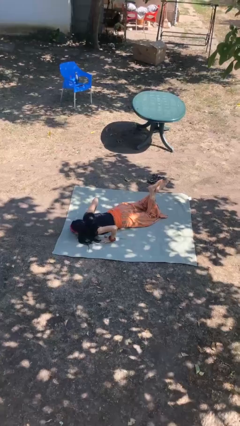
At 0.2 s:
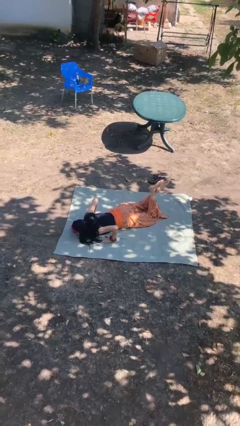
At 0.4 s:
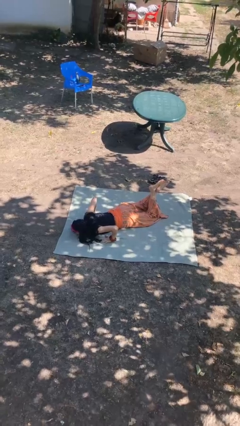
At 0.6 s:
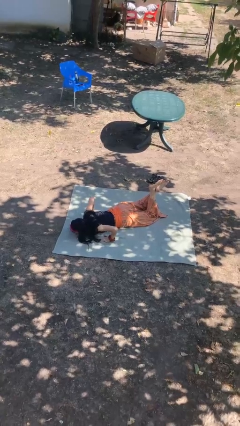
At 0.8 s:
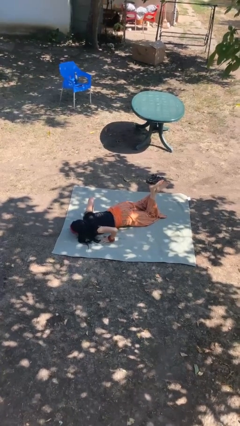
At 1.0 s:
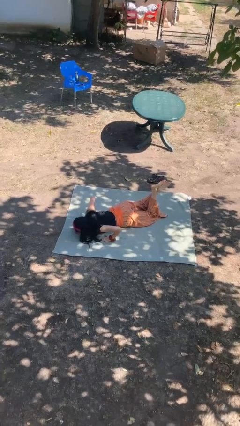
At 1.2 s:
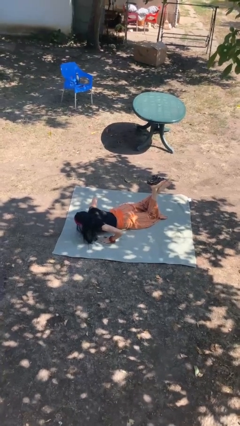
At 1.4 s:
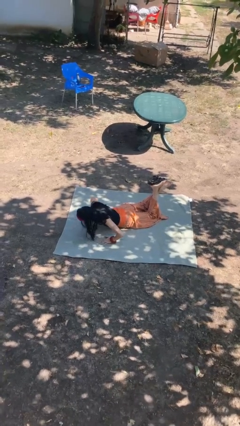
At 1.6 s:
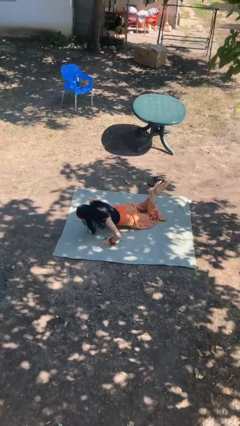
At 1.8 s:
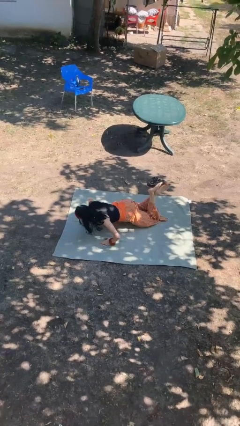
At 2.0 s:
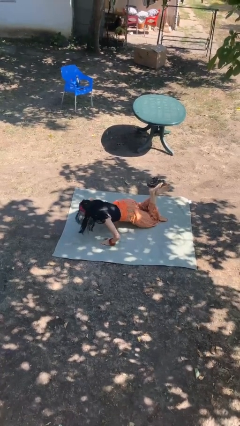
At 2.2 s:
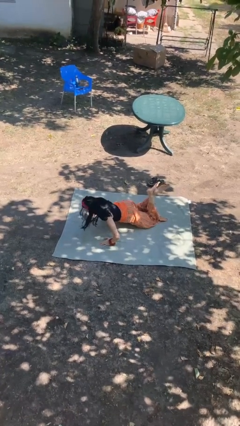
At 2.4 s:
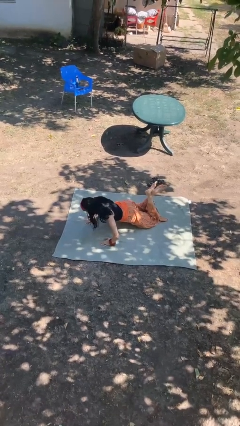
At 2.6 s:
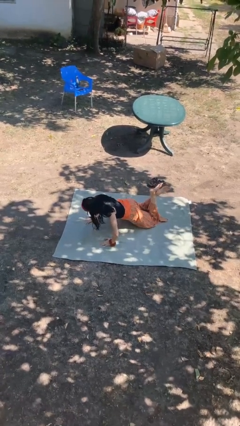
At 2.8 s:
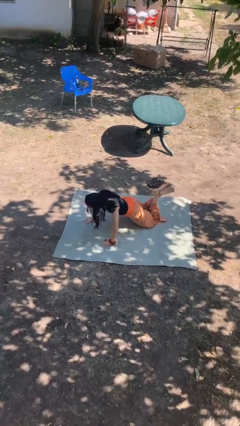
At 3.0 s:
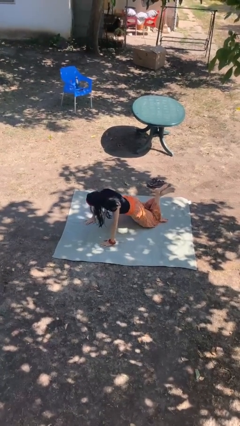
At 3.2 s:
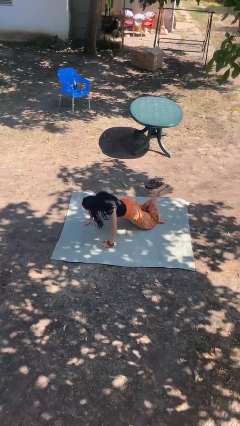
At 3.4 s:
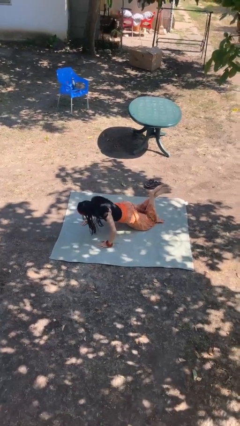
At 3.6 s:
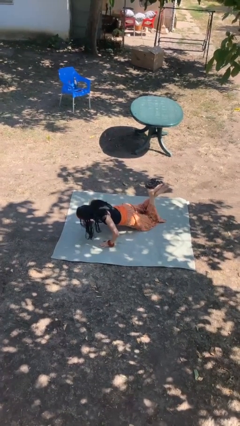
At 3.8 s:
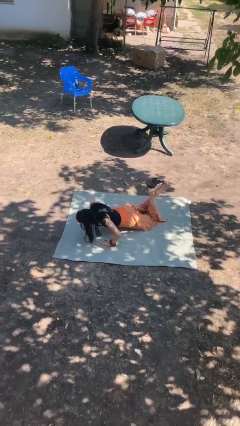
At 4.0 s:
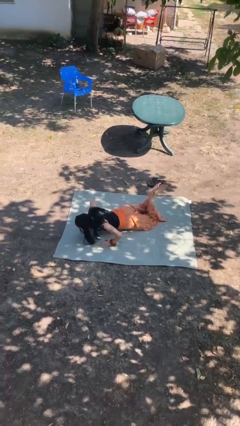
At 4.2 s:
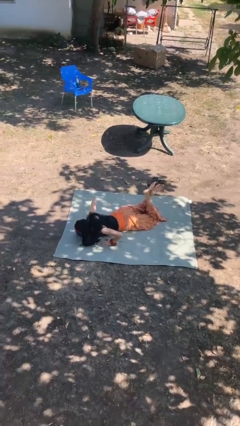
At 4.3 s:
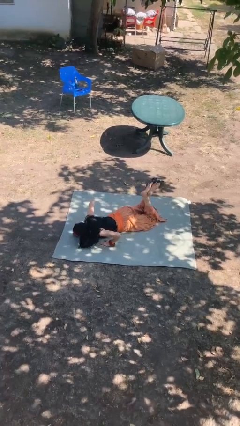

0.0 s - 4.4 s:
person exercises with pushup

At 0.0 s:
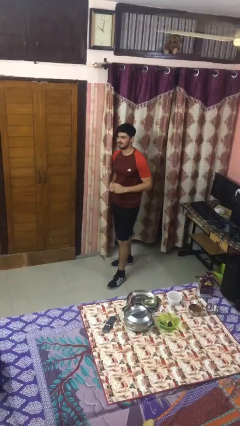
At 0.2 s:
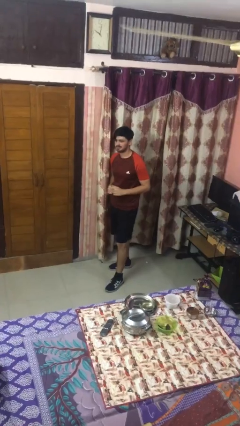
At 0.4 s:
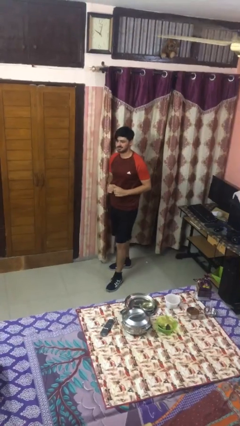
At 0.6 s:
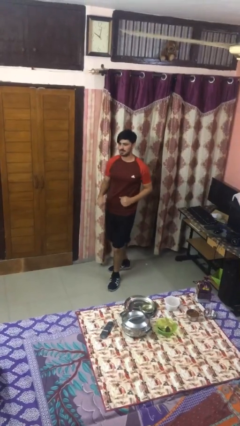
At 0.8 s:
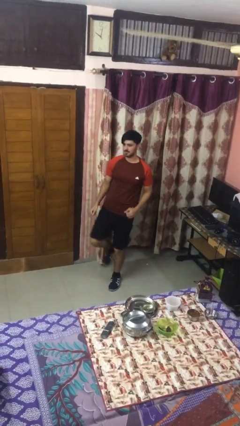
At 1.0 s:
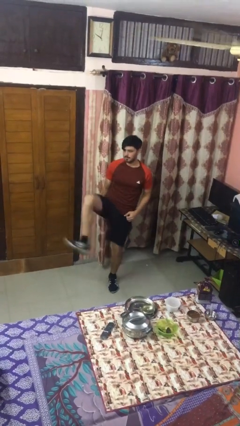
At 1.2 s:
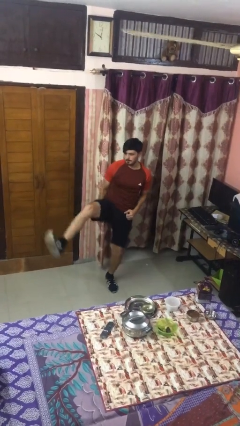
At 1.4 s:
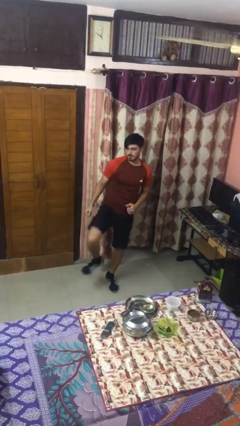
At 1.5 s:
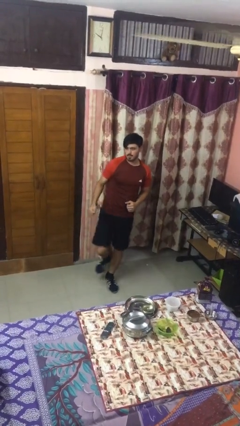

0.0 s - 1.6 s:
person karate kicks

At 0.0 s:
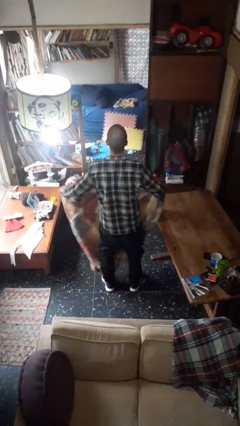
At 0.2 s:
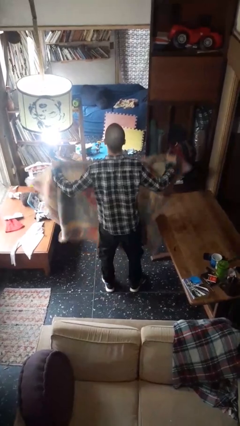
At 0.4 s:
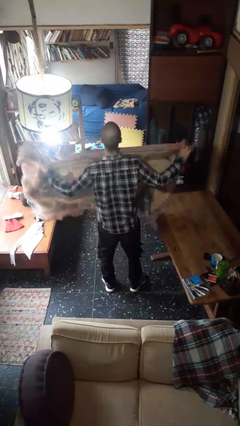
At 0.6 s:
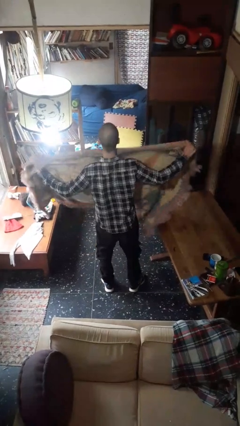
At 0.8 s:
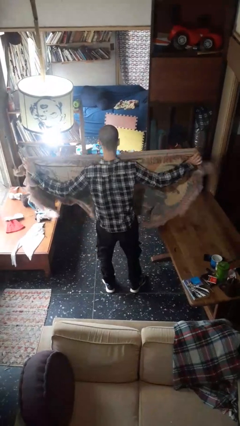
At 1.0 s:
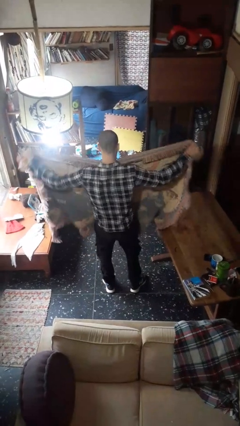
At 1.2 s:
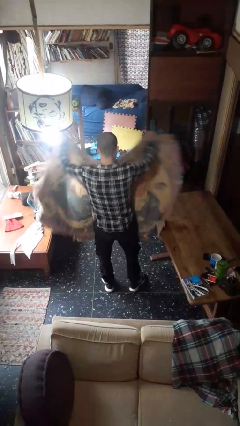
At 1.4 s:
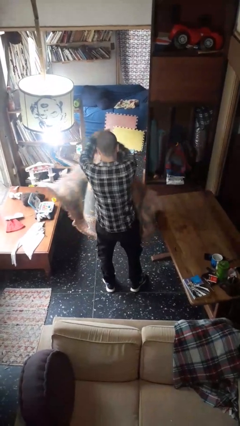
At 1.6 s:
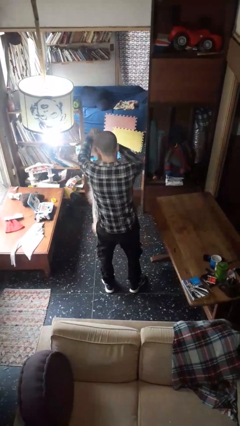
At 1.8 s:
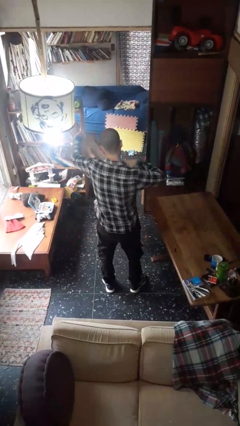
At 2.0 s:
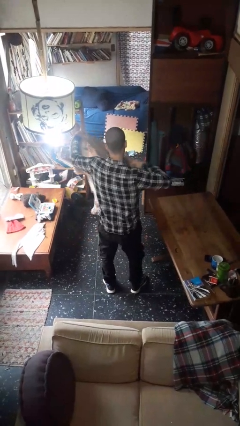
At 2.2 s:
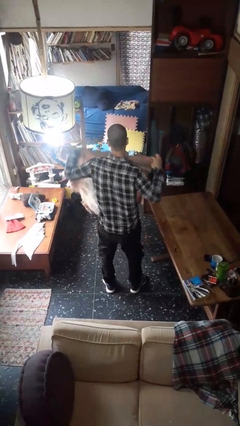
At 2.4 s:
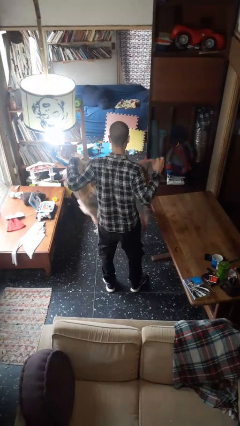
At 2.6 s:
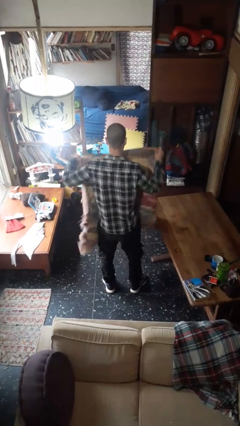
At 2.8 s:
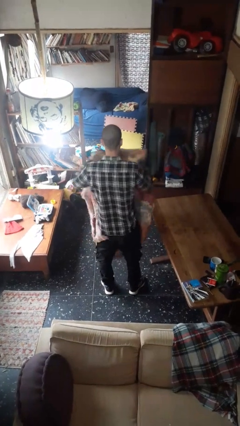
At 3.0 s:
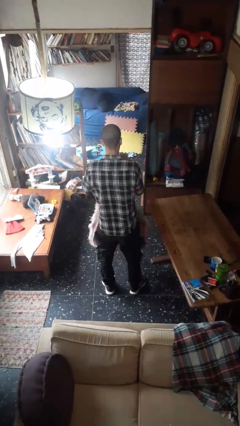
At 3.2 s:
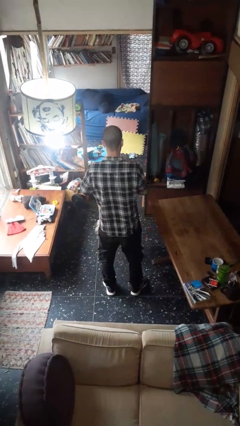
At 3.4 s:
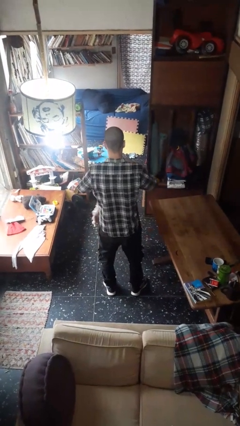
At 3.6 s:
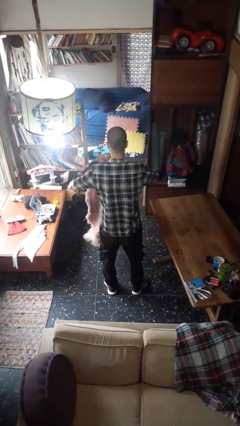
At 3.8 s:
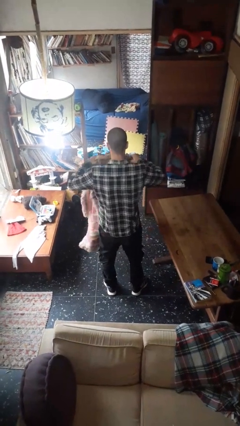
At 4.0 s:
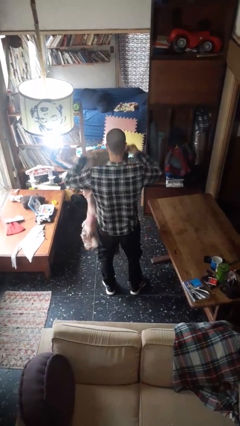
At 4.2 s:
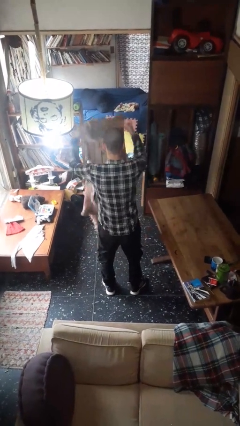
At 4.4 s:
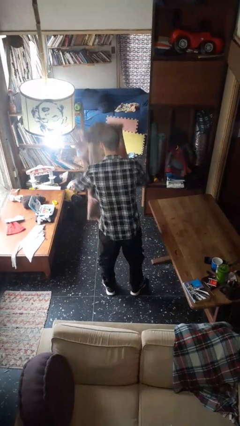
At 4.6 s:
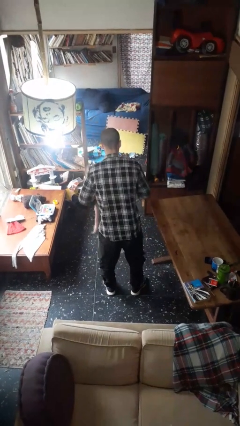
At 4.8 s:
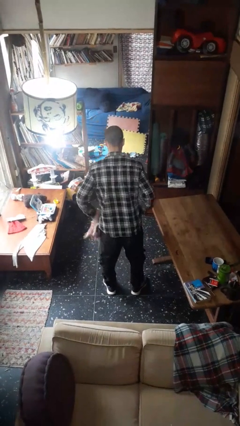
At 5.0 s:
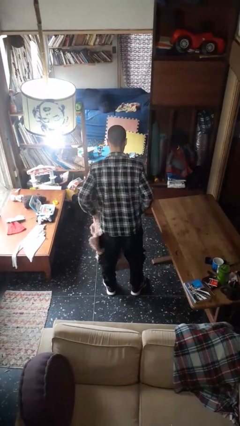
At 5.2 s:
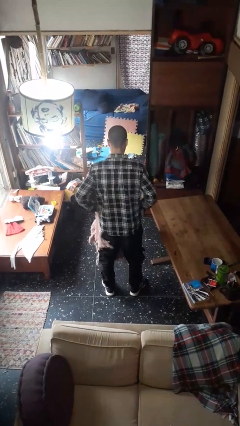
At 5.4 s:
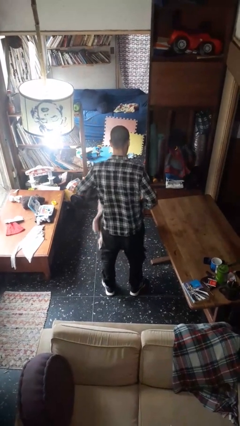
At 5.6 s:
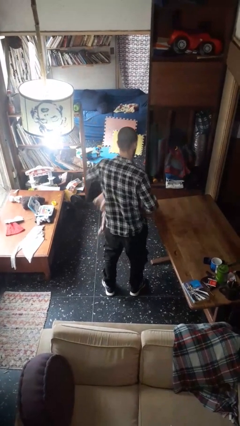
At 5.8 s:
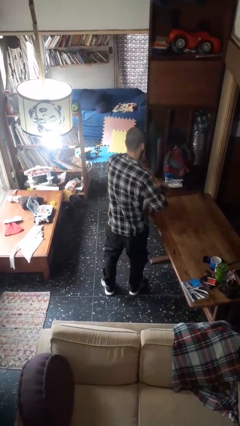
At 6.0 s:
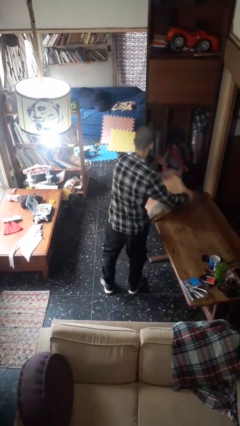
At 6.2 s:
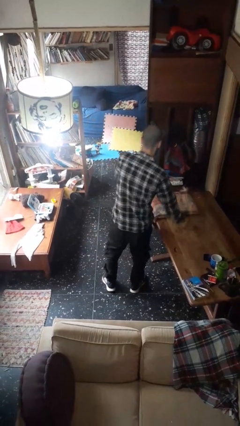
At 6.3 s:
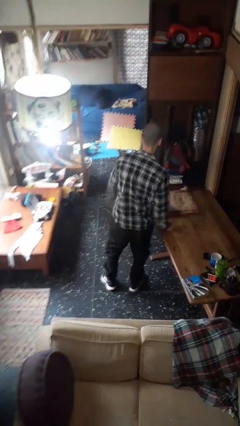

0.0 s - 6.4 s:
person folds blanket

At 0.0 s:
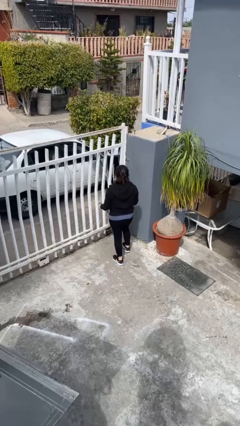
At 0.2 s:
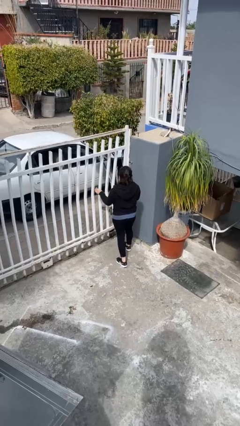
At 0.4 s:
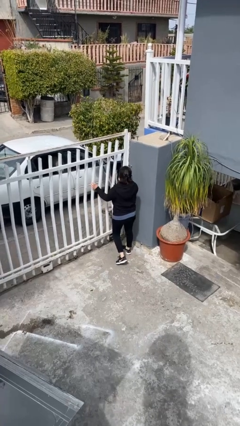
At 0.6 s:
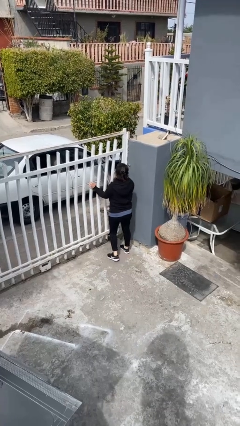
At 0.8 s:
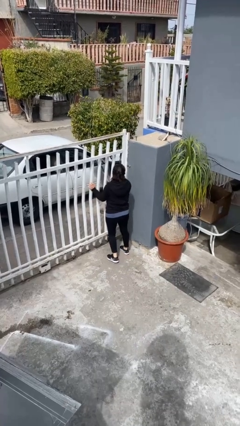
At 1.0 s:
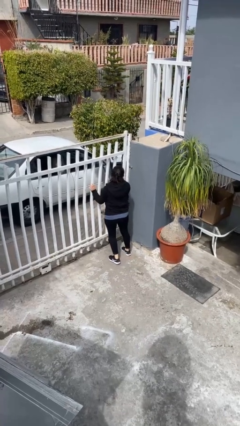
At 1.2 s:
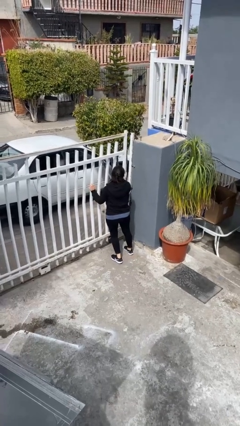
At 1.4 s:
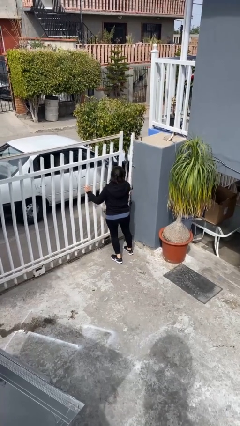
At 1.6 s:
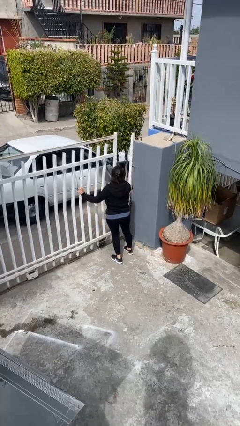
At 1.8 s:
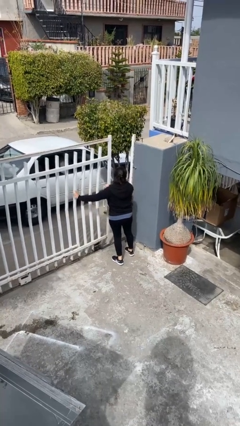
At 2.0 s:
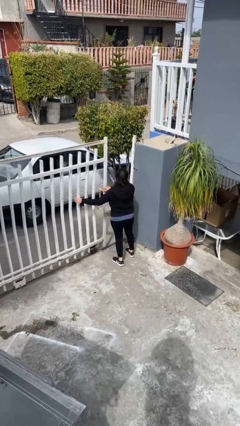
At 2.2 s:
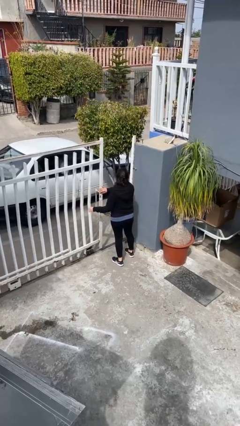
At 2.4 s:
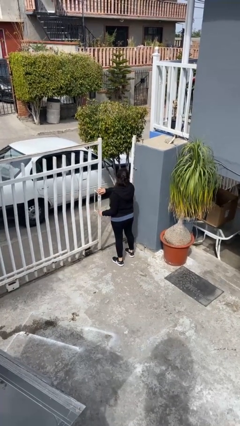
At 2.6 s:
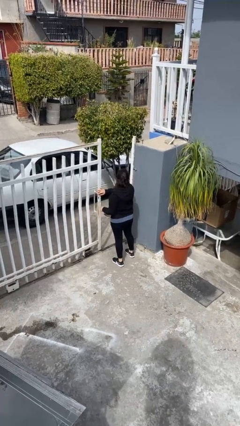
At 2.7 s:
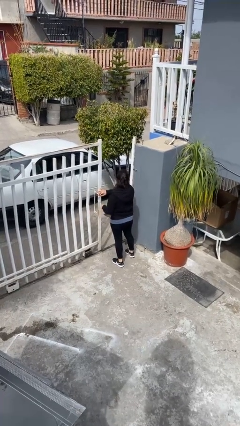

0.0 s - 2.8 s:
person opens facility door

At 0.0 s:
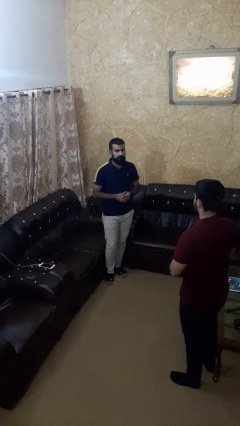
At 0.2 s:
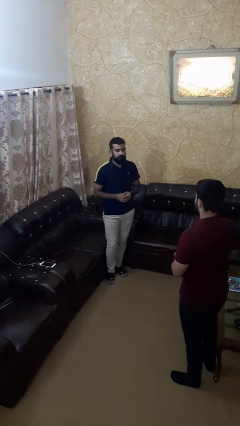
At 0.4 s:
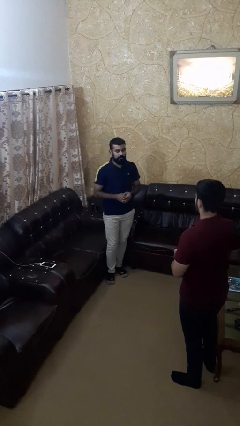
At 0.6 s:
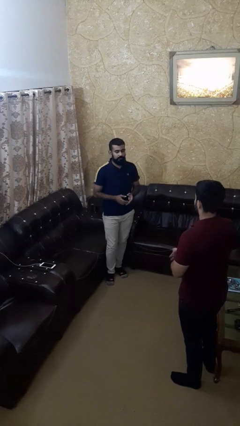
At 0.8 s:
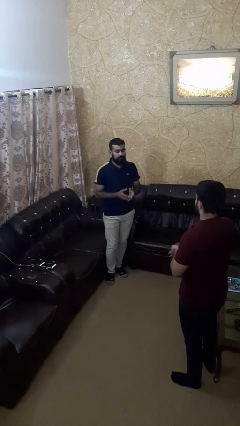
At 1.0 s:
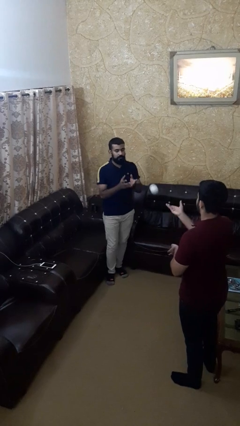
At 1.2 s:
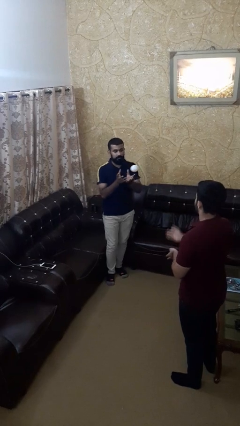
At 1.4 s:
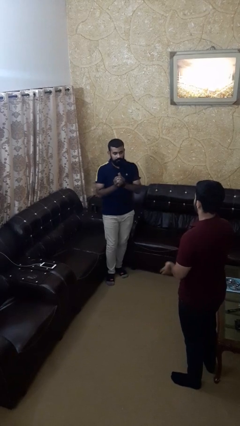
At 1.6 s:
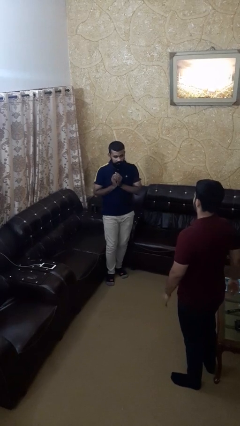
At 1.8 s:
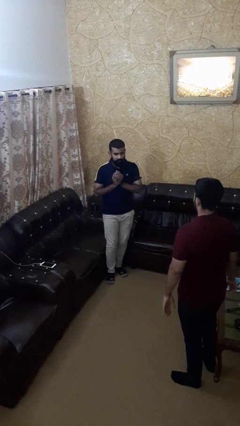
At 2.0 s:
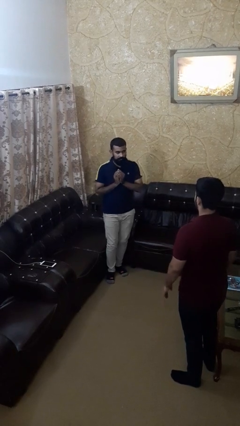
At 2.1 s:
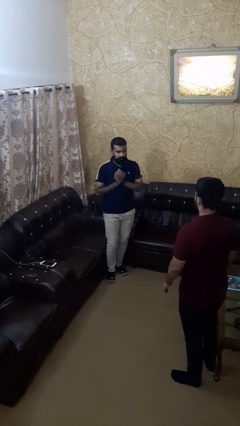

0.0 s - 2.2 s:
person catches object from person
